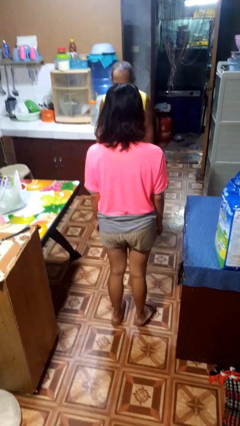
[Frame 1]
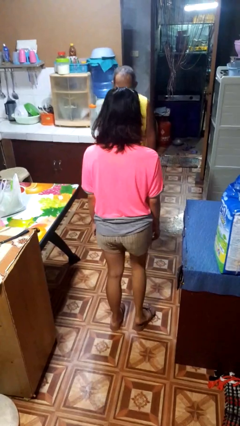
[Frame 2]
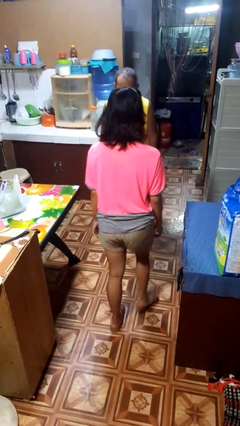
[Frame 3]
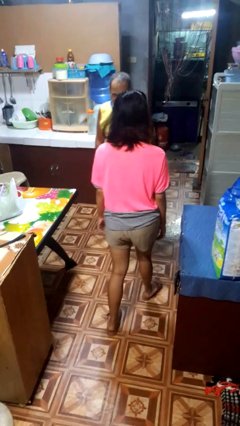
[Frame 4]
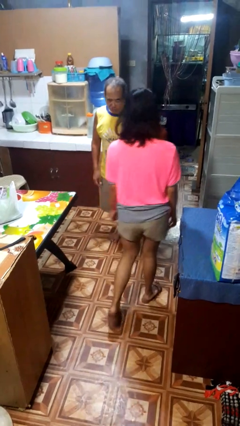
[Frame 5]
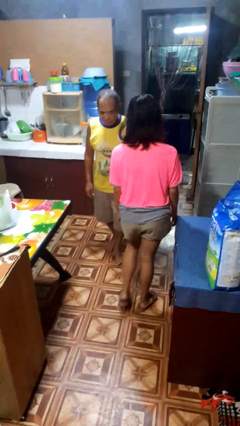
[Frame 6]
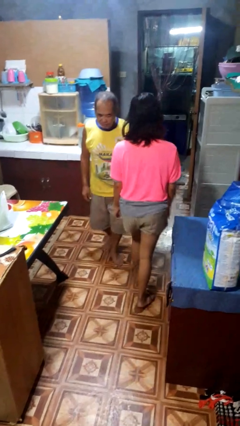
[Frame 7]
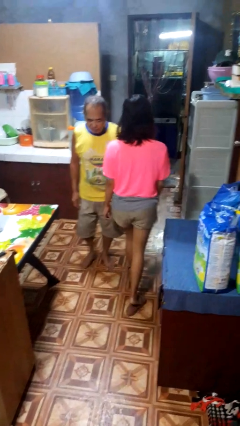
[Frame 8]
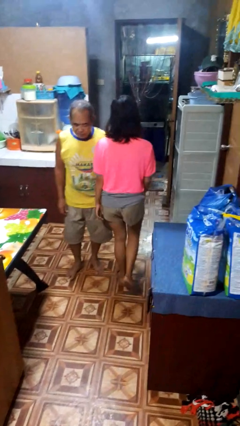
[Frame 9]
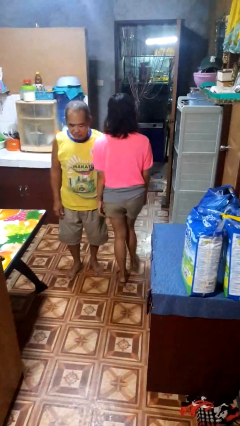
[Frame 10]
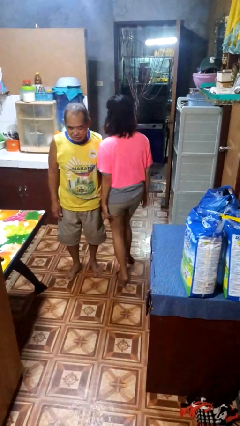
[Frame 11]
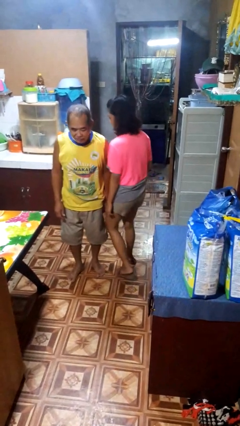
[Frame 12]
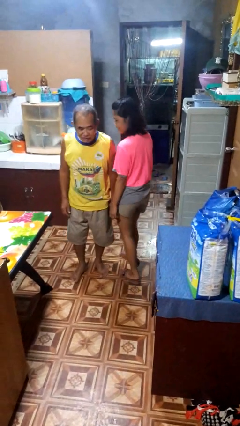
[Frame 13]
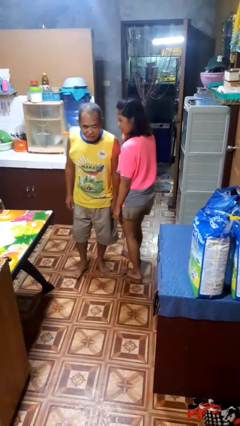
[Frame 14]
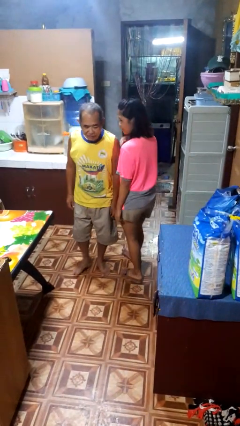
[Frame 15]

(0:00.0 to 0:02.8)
person bumps into person

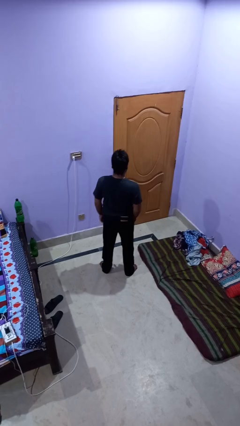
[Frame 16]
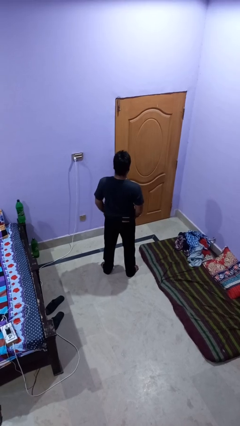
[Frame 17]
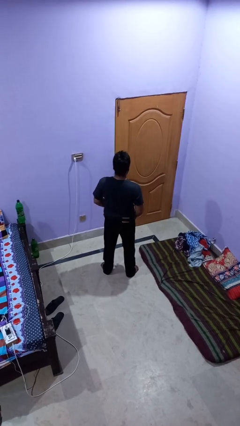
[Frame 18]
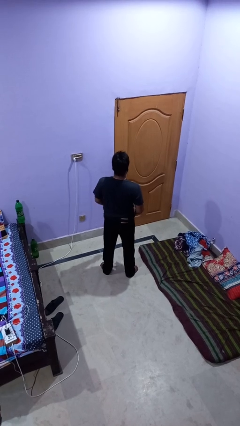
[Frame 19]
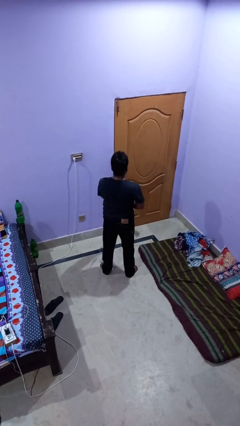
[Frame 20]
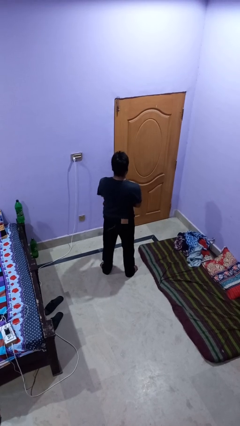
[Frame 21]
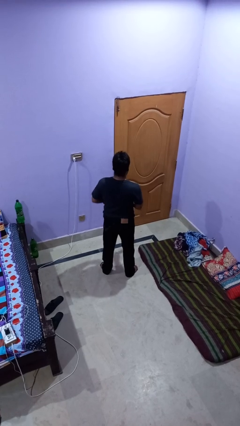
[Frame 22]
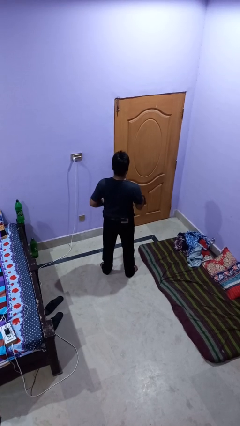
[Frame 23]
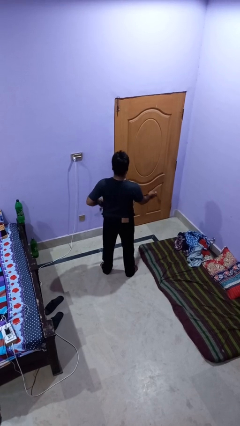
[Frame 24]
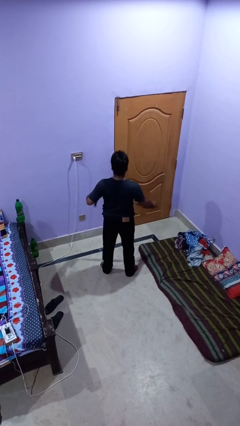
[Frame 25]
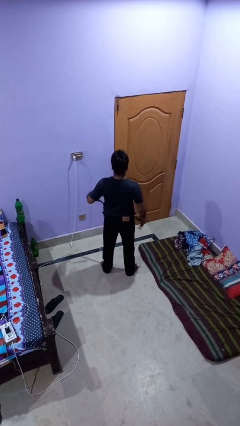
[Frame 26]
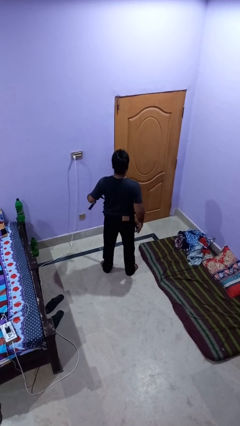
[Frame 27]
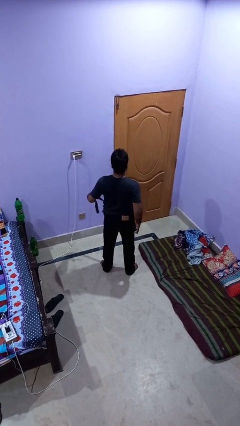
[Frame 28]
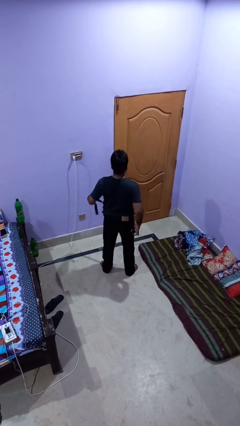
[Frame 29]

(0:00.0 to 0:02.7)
person takes off belt

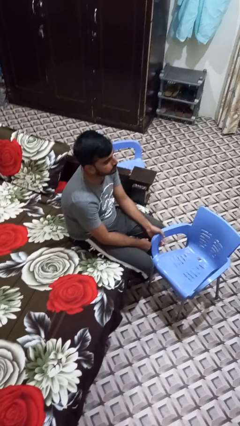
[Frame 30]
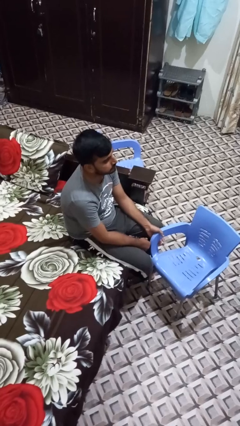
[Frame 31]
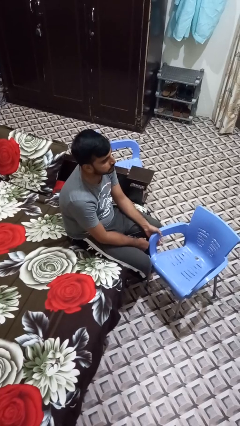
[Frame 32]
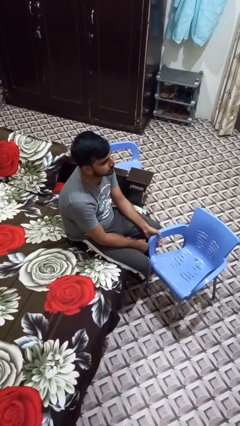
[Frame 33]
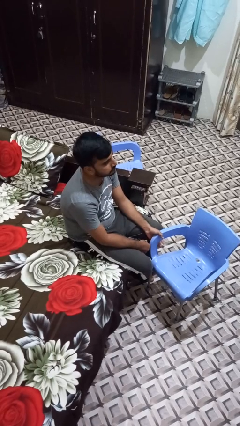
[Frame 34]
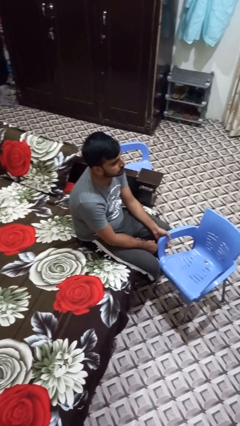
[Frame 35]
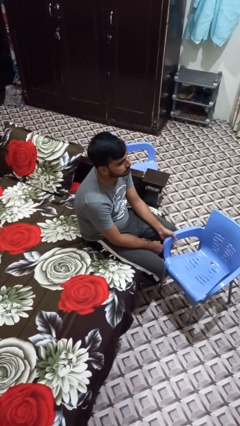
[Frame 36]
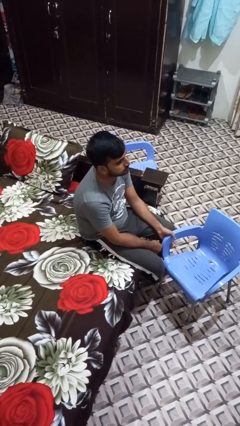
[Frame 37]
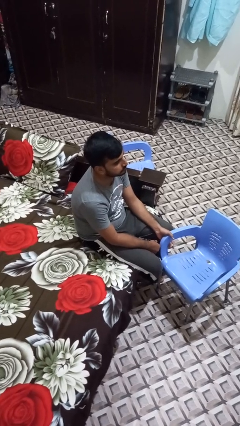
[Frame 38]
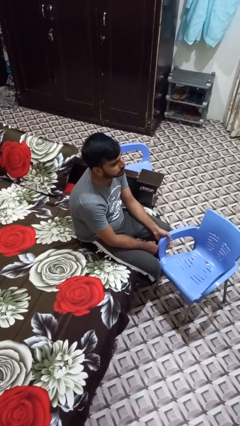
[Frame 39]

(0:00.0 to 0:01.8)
person sets upright furniture

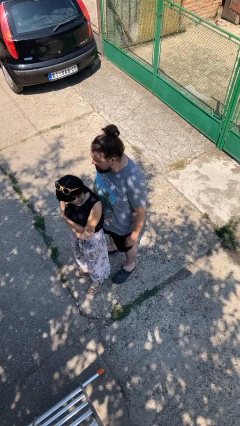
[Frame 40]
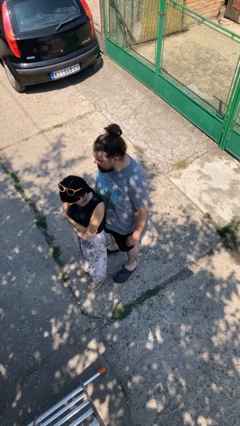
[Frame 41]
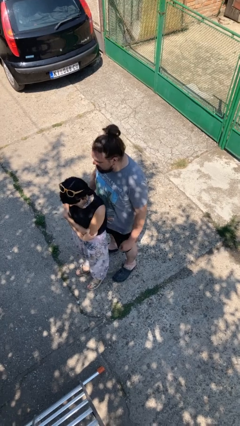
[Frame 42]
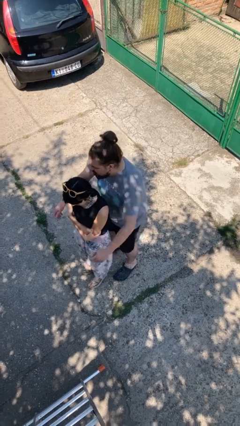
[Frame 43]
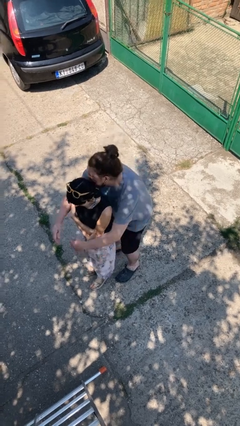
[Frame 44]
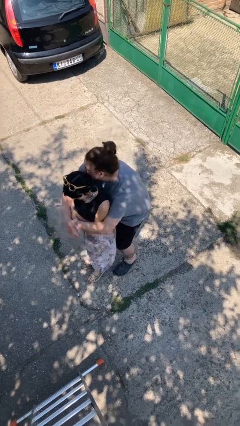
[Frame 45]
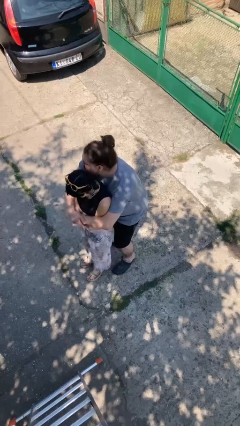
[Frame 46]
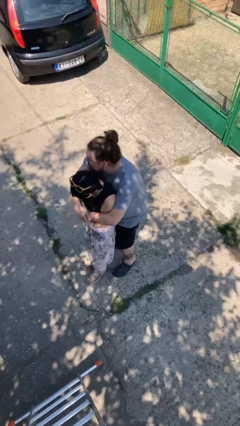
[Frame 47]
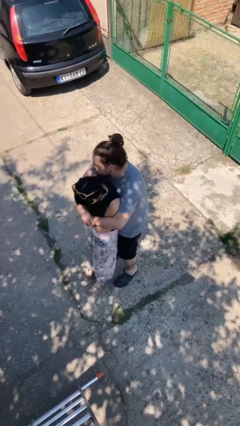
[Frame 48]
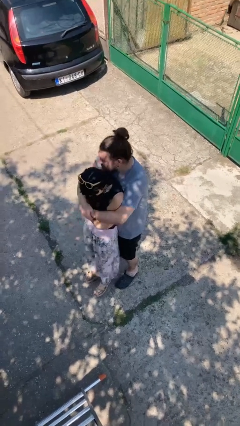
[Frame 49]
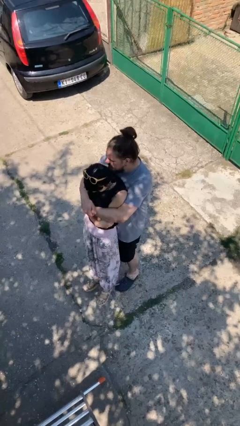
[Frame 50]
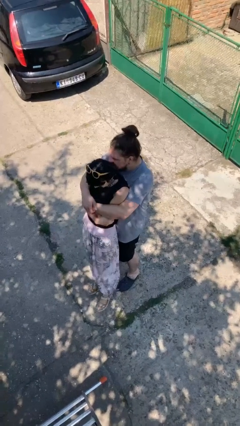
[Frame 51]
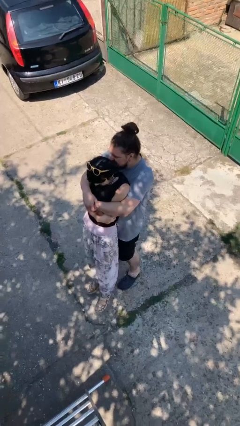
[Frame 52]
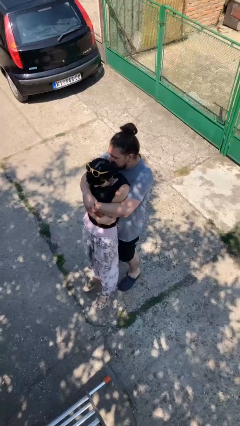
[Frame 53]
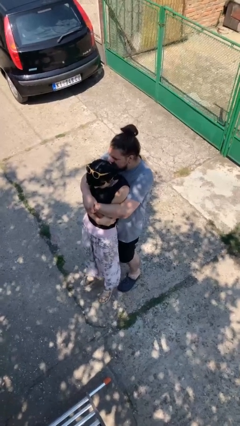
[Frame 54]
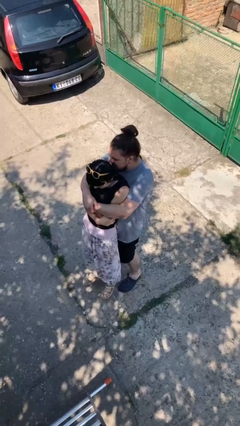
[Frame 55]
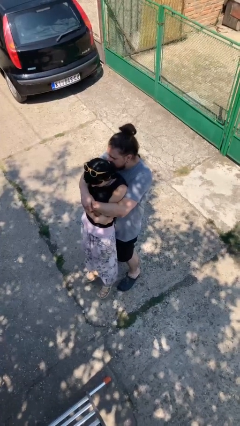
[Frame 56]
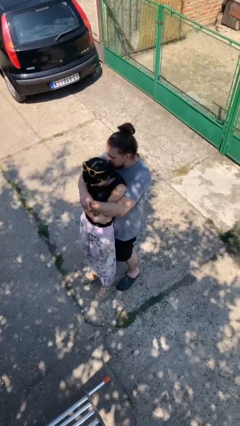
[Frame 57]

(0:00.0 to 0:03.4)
person picks up person

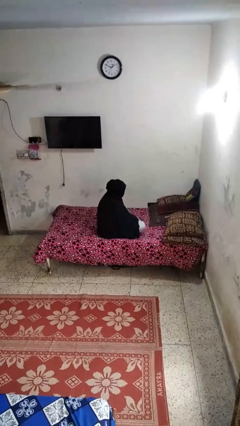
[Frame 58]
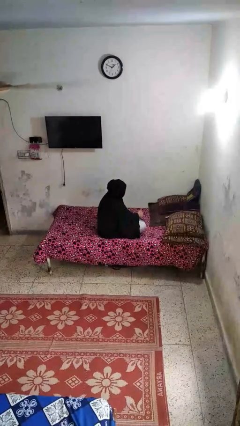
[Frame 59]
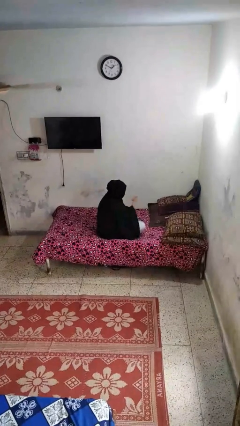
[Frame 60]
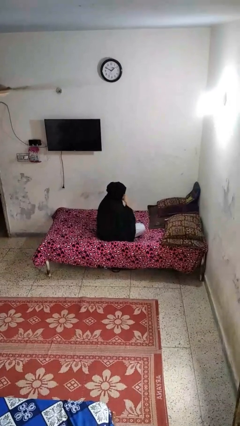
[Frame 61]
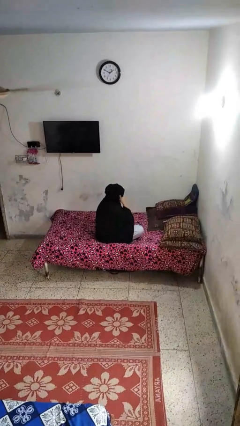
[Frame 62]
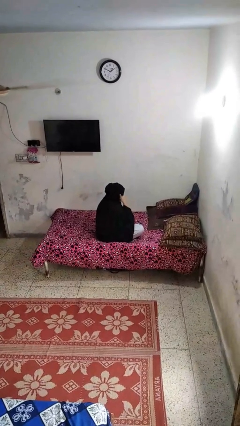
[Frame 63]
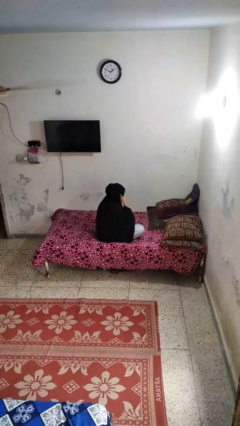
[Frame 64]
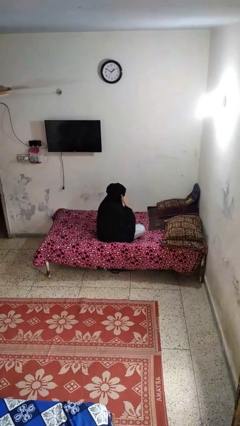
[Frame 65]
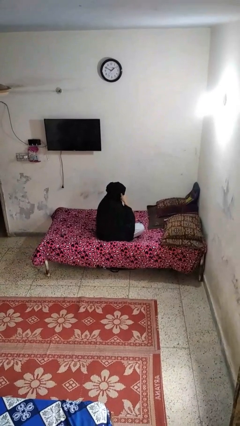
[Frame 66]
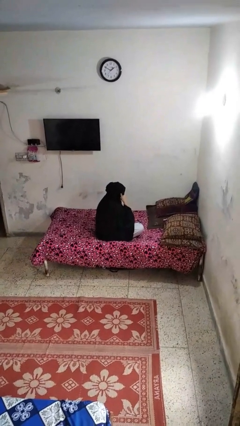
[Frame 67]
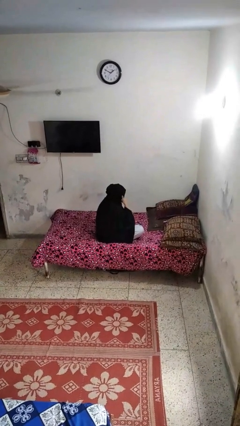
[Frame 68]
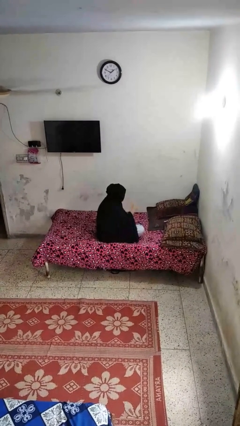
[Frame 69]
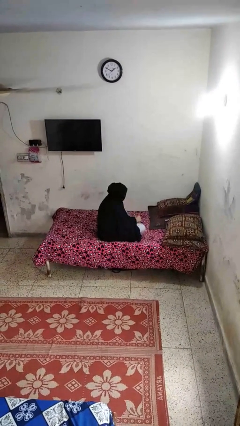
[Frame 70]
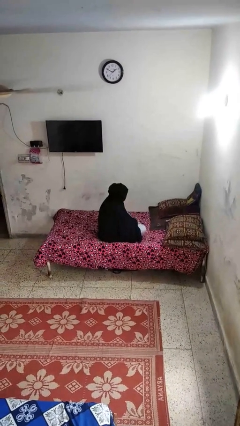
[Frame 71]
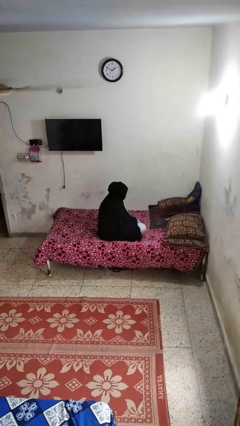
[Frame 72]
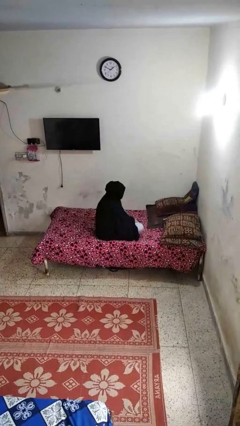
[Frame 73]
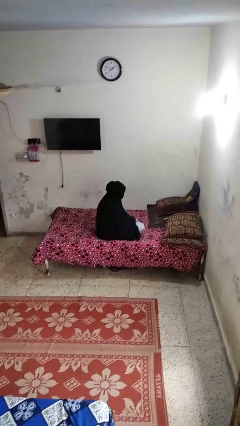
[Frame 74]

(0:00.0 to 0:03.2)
person gestures call me

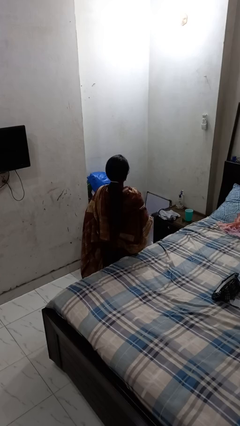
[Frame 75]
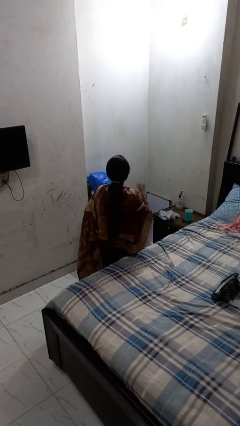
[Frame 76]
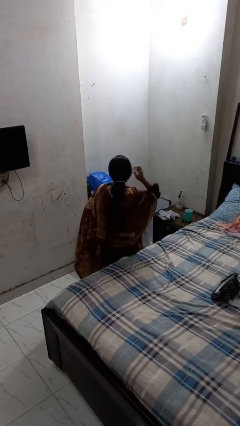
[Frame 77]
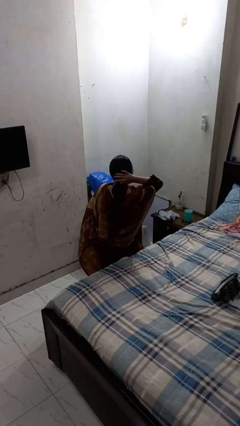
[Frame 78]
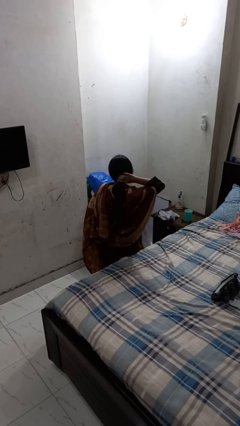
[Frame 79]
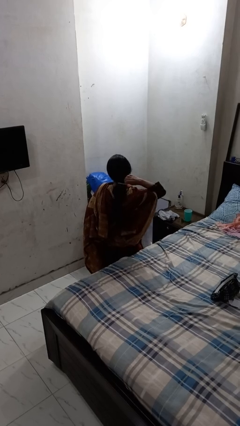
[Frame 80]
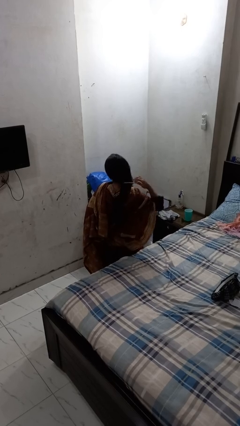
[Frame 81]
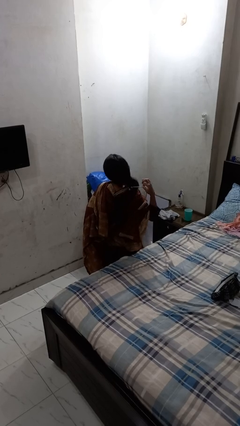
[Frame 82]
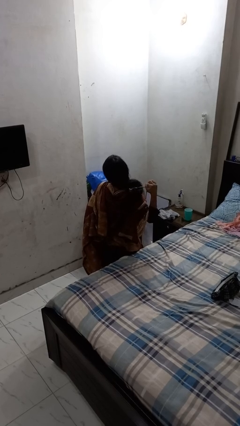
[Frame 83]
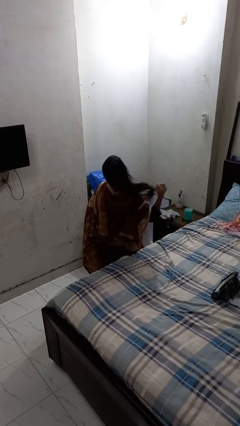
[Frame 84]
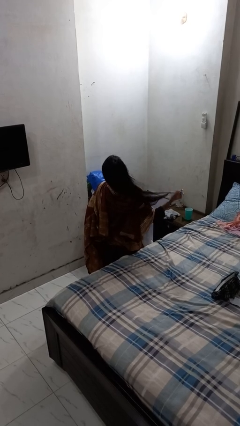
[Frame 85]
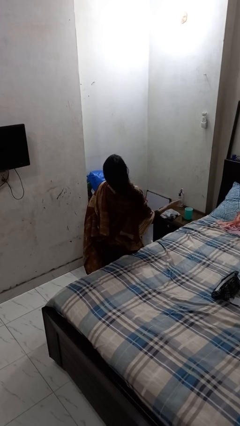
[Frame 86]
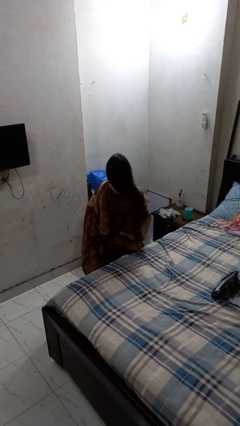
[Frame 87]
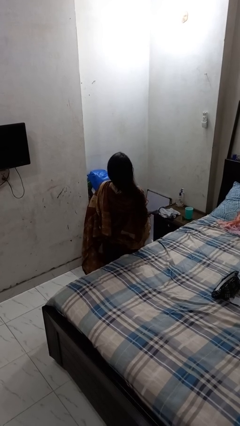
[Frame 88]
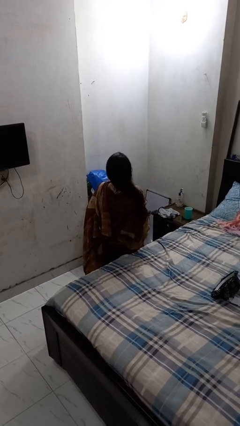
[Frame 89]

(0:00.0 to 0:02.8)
person takes off hairtie

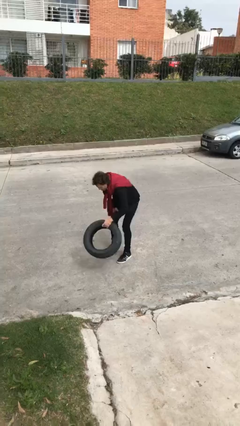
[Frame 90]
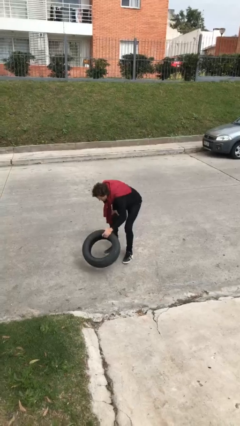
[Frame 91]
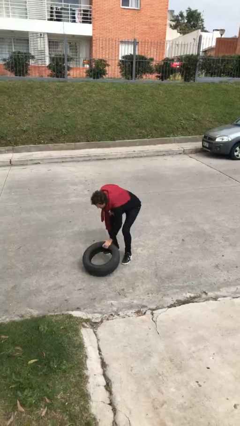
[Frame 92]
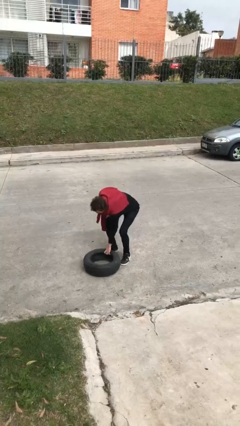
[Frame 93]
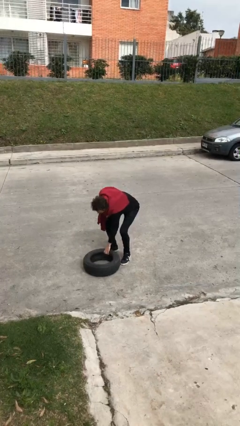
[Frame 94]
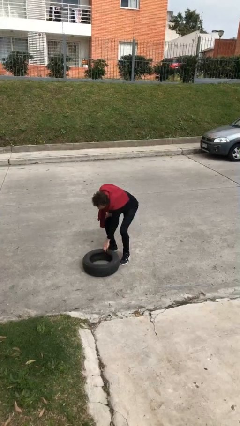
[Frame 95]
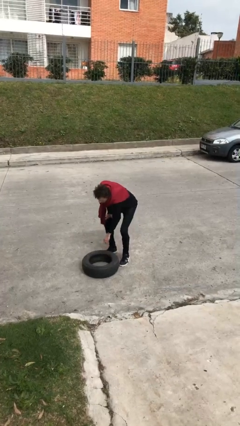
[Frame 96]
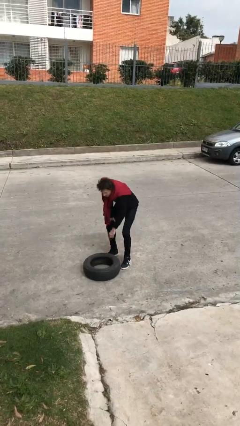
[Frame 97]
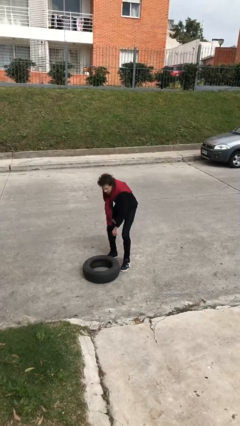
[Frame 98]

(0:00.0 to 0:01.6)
person puts down object on floor
